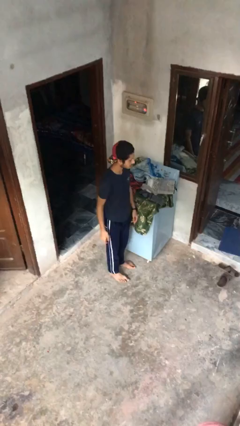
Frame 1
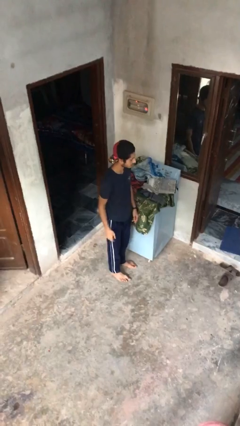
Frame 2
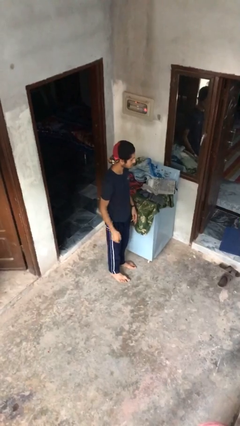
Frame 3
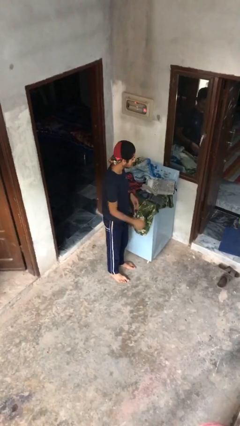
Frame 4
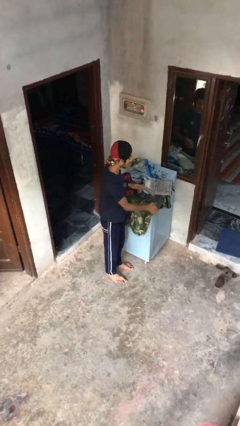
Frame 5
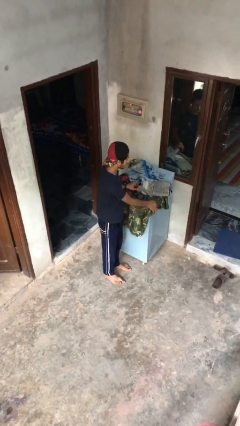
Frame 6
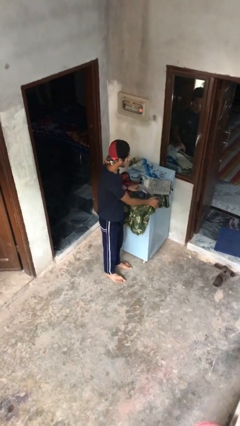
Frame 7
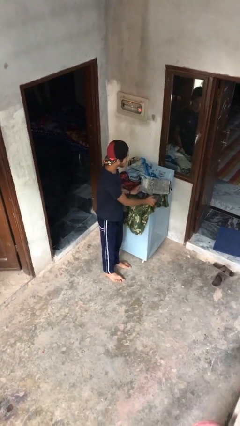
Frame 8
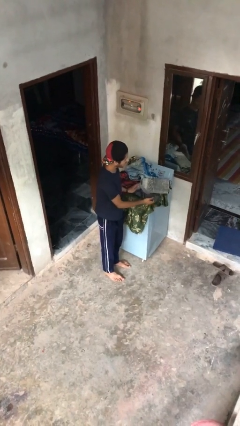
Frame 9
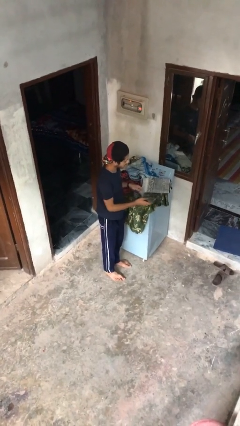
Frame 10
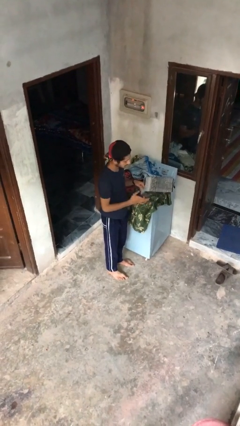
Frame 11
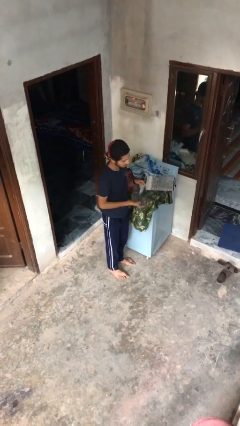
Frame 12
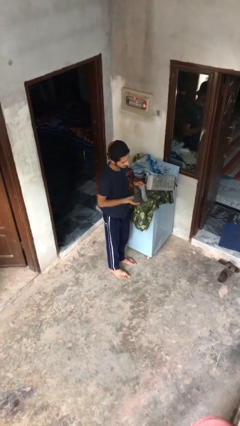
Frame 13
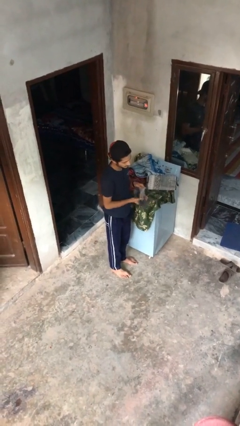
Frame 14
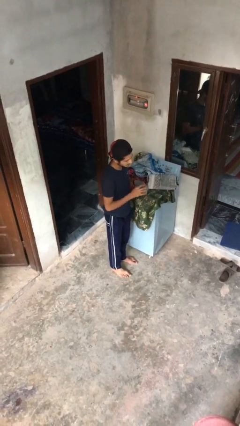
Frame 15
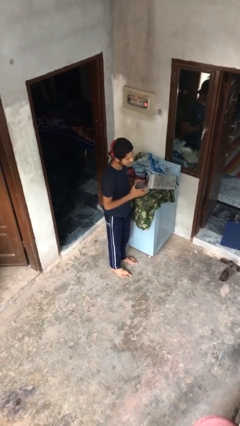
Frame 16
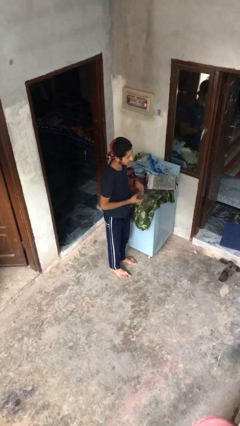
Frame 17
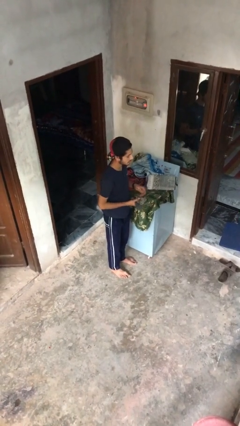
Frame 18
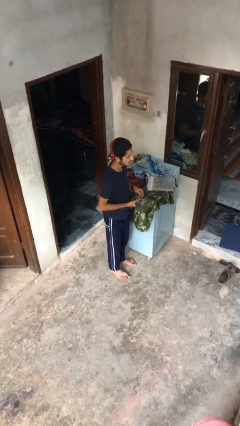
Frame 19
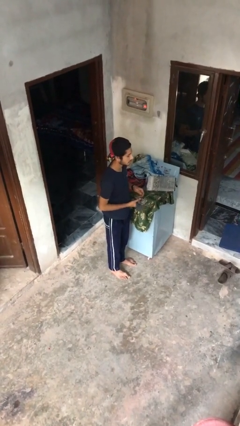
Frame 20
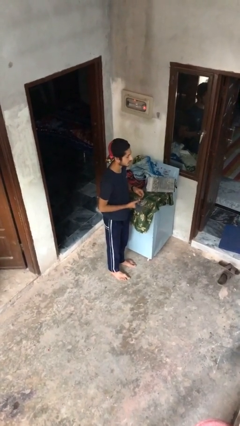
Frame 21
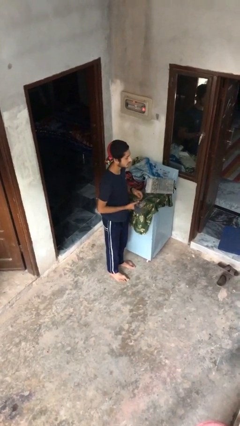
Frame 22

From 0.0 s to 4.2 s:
person folds socks

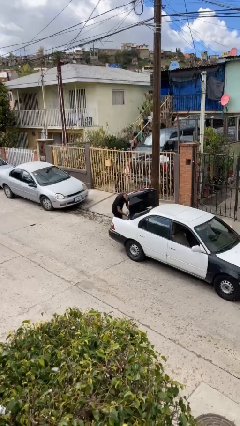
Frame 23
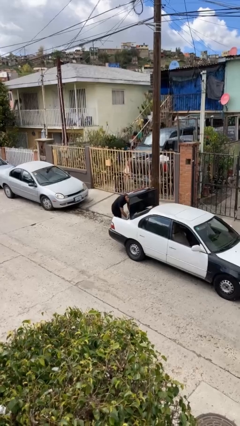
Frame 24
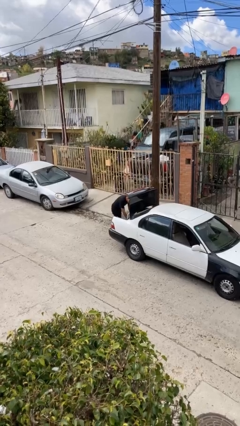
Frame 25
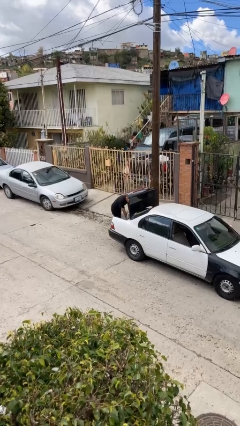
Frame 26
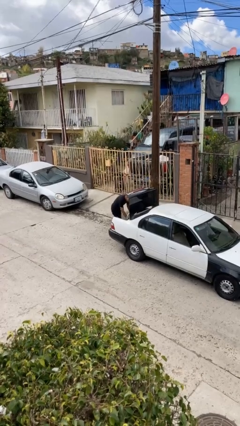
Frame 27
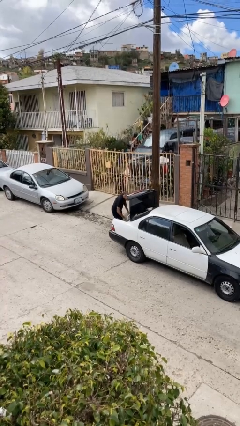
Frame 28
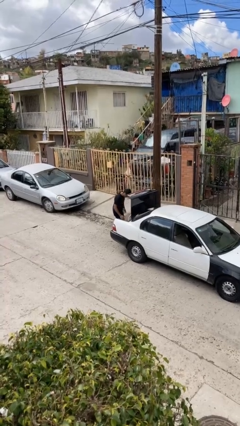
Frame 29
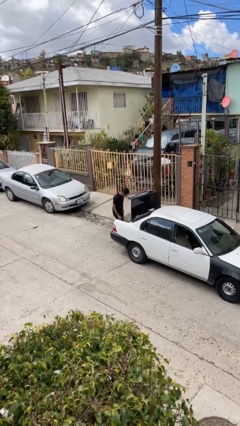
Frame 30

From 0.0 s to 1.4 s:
person loads car

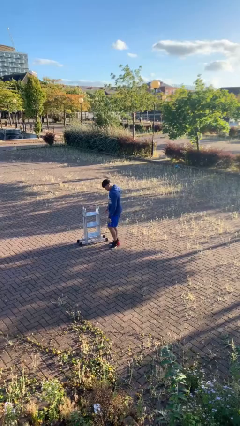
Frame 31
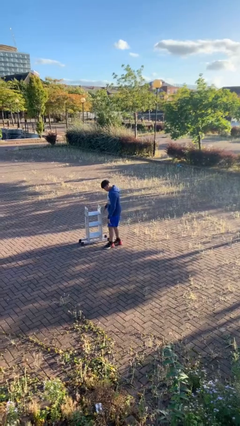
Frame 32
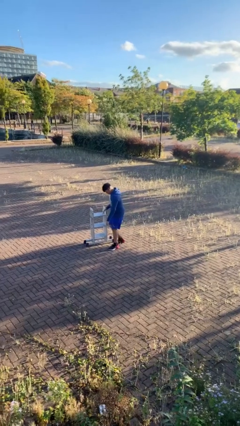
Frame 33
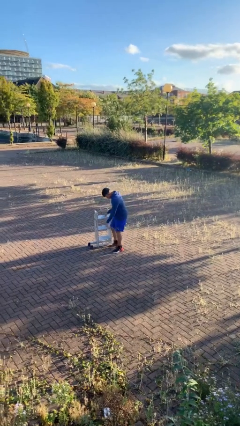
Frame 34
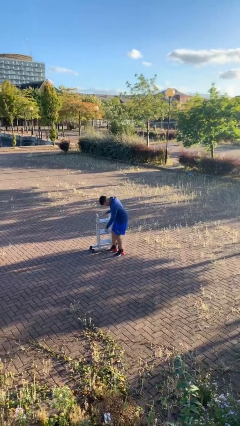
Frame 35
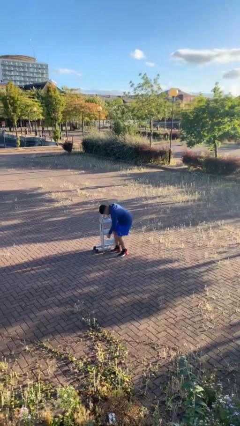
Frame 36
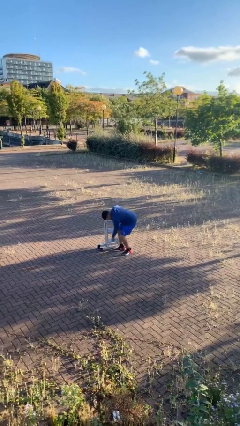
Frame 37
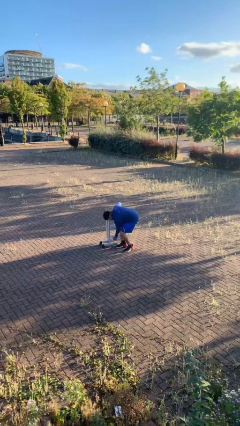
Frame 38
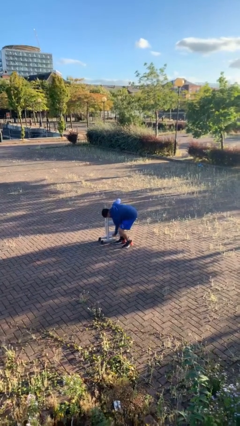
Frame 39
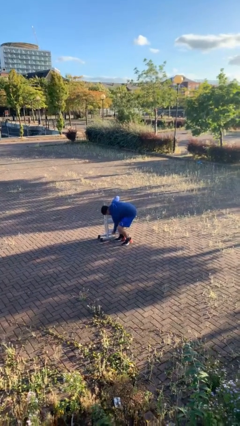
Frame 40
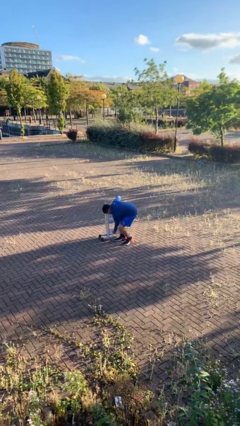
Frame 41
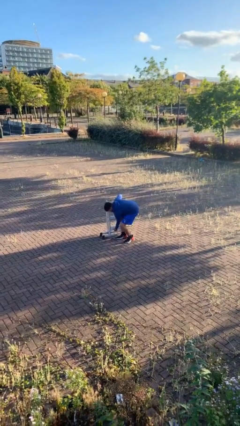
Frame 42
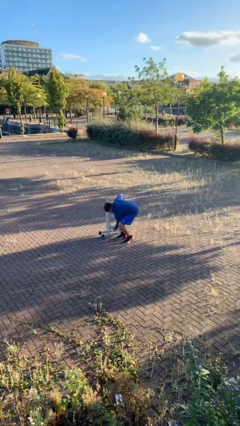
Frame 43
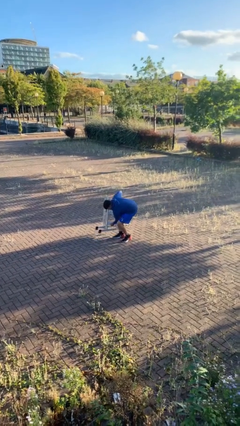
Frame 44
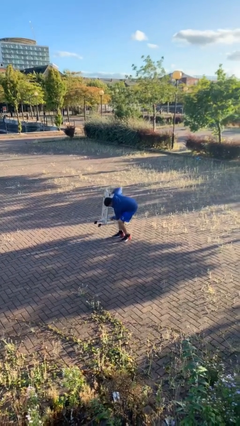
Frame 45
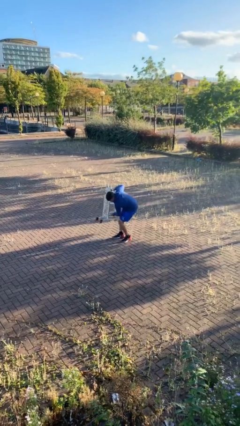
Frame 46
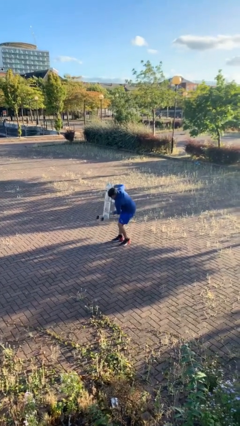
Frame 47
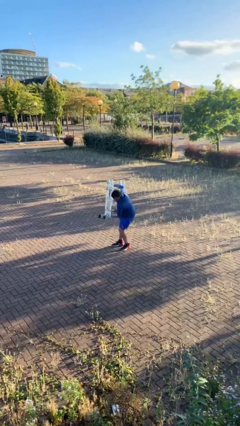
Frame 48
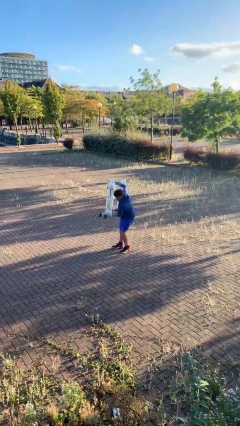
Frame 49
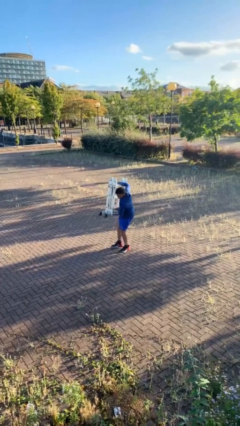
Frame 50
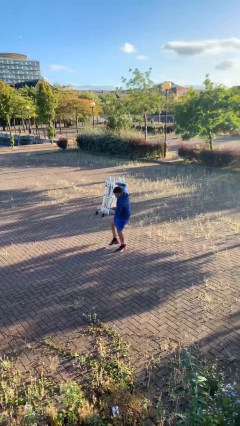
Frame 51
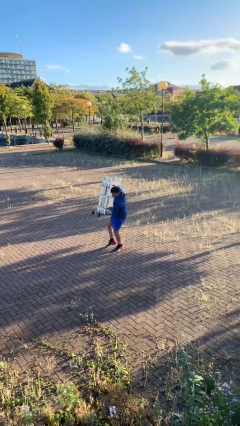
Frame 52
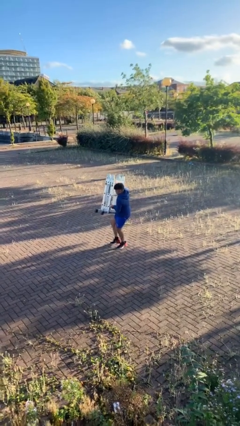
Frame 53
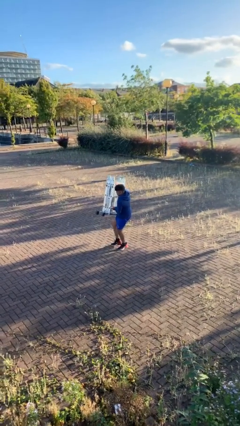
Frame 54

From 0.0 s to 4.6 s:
person picks up object from floor

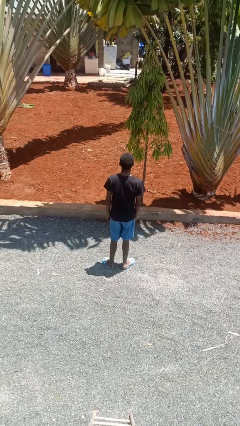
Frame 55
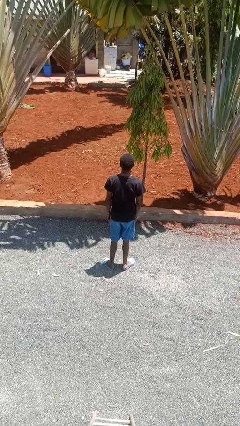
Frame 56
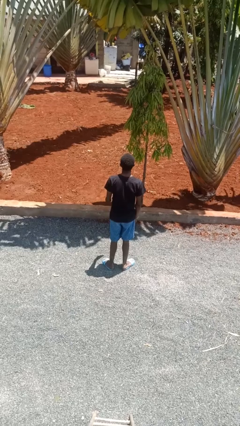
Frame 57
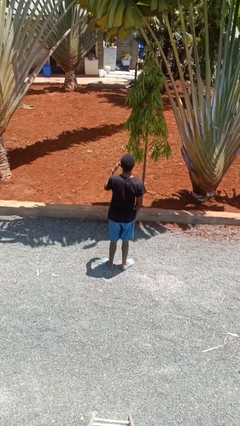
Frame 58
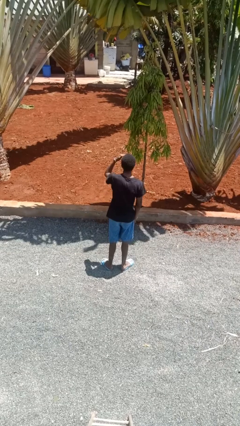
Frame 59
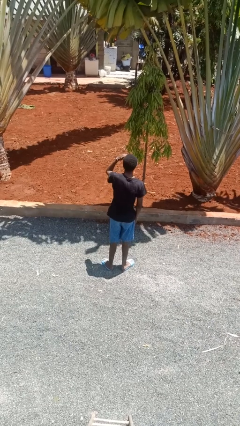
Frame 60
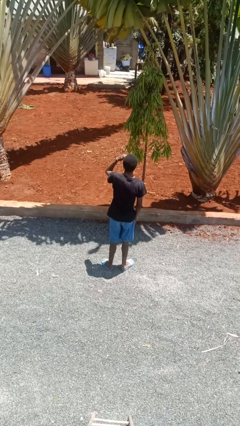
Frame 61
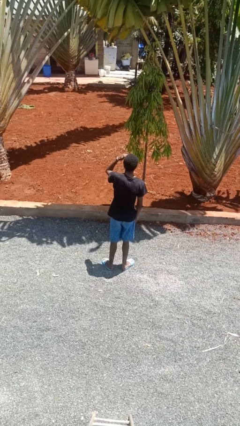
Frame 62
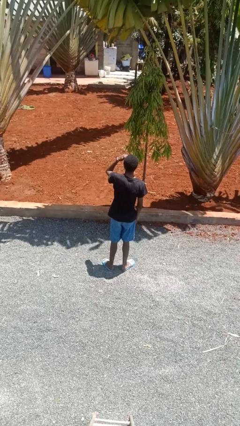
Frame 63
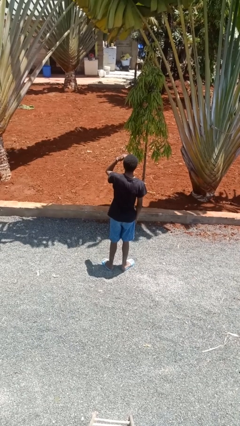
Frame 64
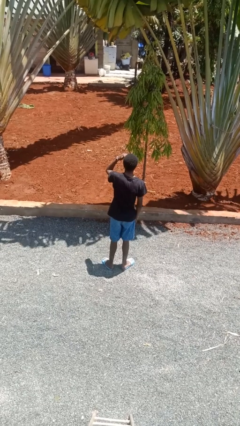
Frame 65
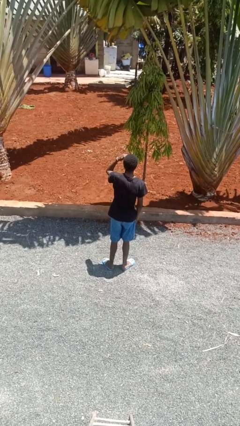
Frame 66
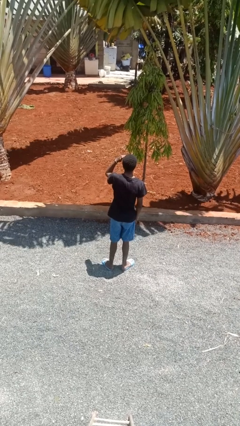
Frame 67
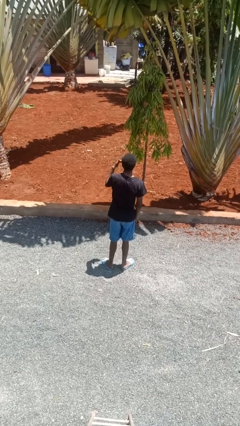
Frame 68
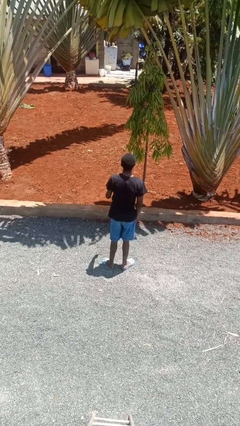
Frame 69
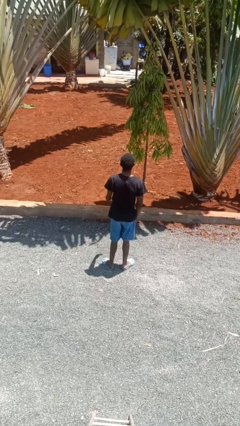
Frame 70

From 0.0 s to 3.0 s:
person shades eyes

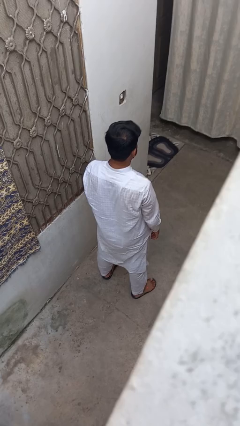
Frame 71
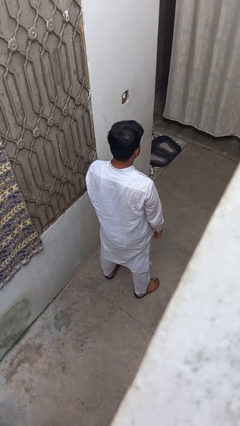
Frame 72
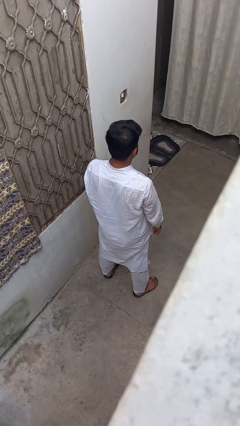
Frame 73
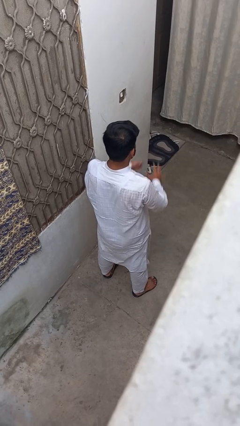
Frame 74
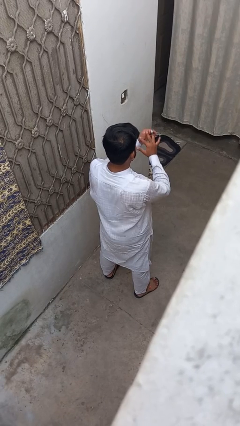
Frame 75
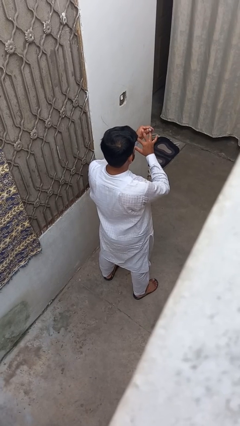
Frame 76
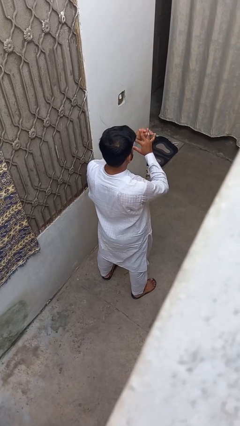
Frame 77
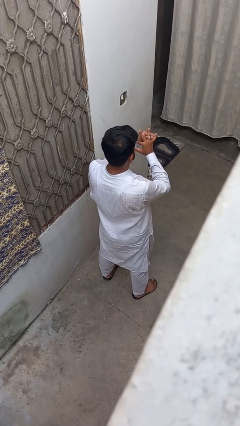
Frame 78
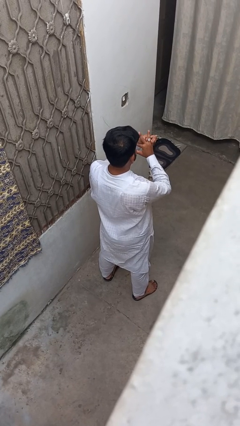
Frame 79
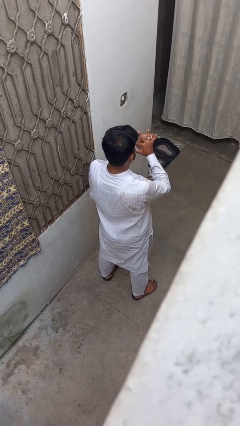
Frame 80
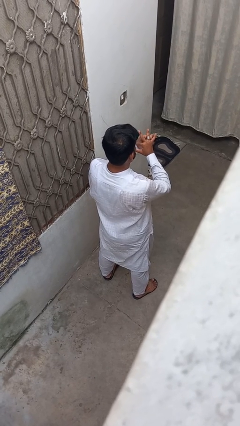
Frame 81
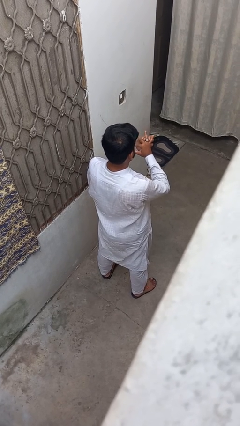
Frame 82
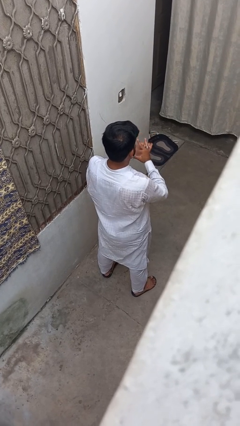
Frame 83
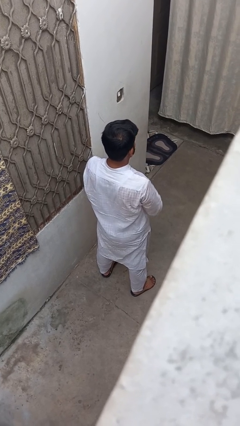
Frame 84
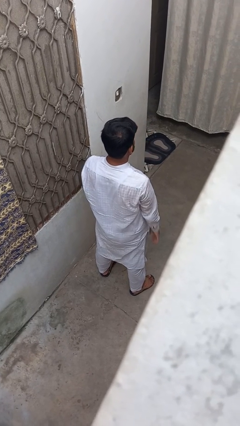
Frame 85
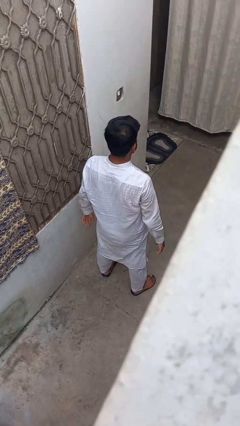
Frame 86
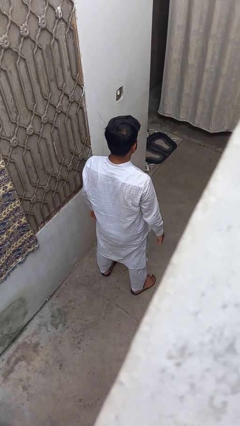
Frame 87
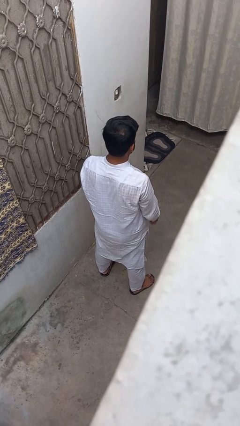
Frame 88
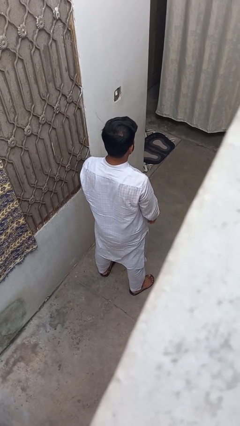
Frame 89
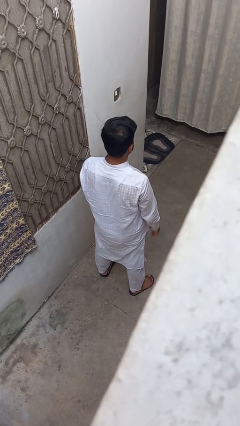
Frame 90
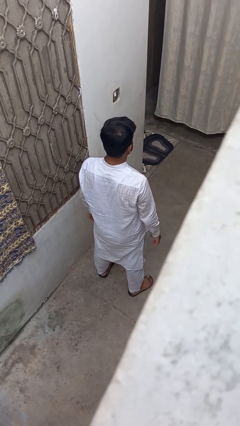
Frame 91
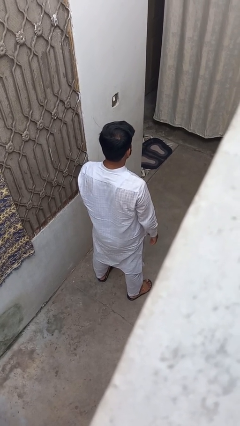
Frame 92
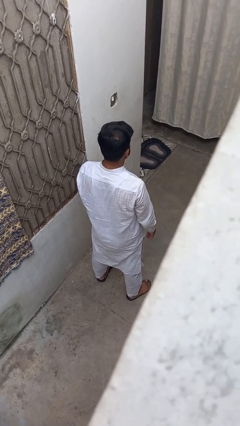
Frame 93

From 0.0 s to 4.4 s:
person puts on ring
